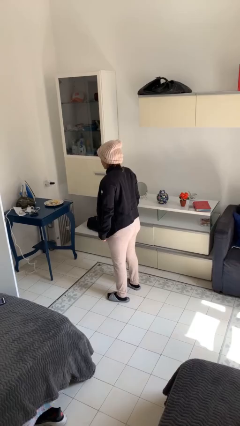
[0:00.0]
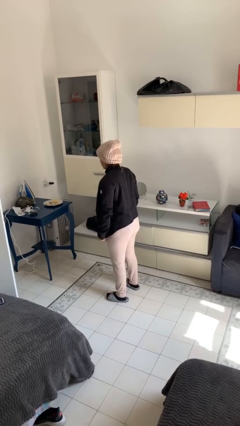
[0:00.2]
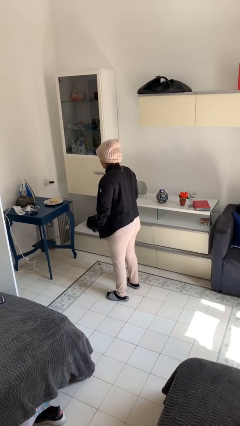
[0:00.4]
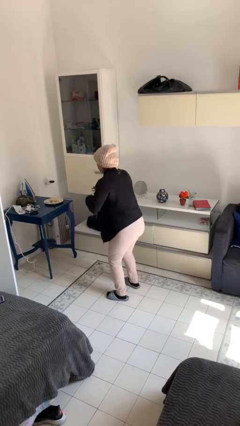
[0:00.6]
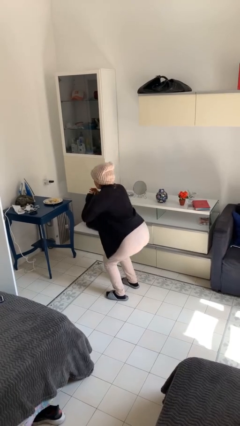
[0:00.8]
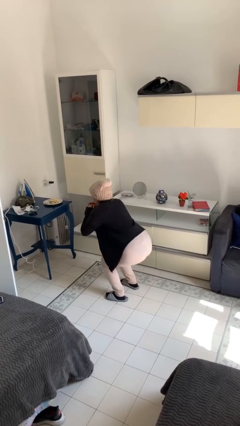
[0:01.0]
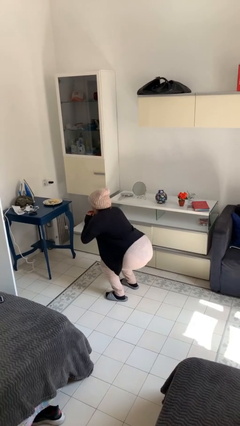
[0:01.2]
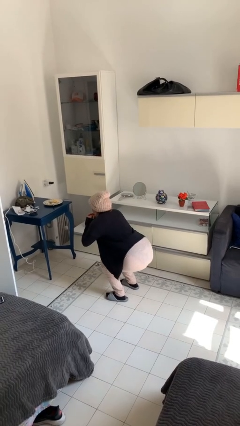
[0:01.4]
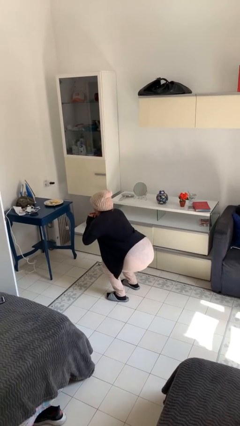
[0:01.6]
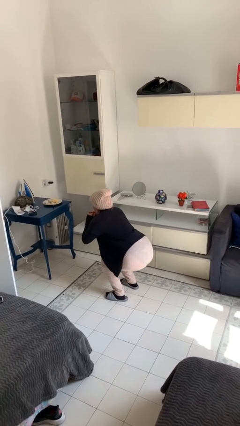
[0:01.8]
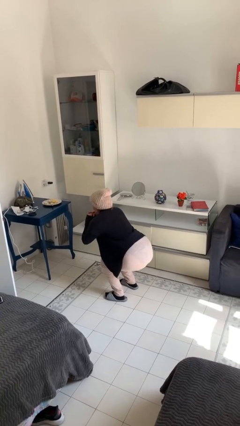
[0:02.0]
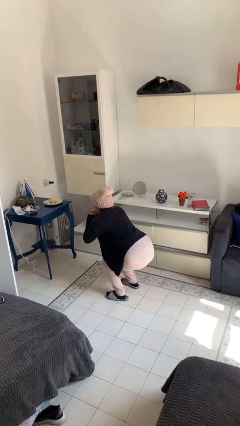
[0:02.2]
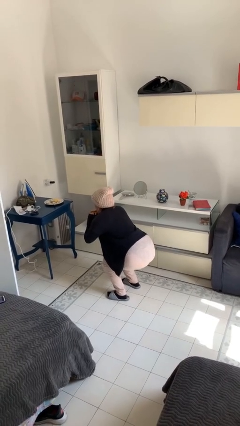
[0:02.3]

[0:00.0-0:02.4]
person squats

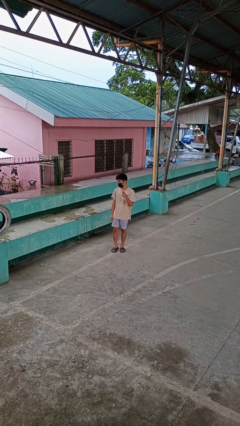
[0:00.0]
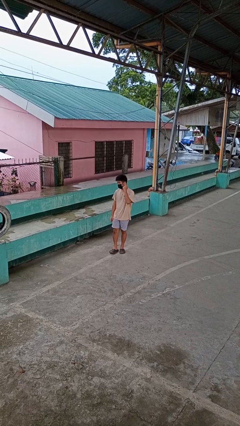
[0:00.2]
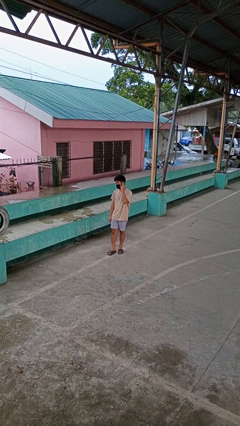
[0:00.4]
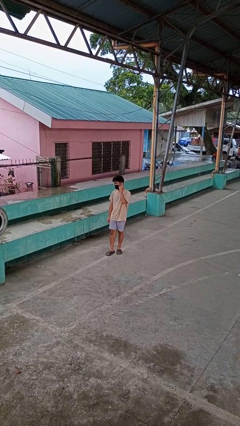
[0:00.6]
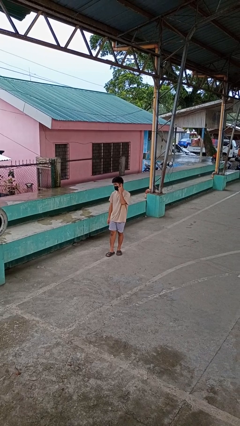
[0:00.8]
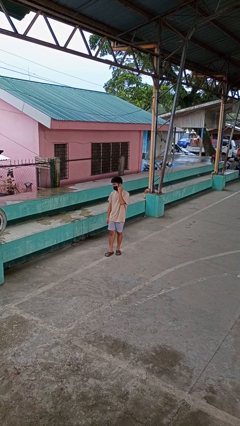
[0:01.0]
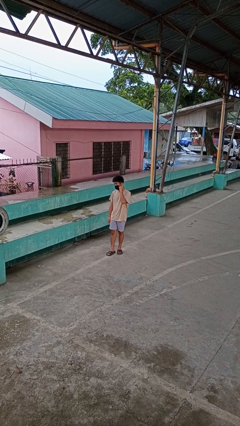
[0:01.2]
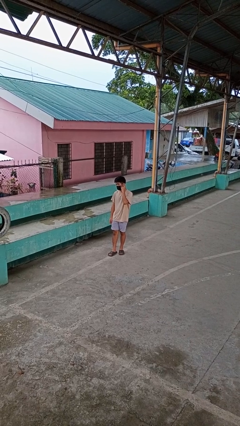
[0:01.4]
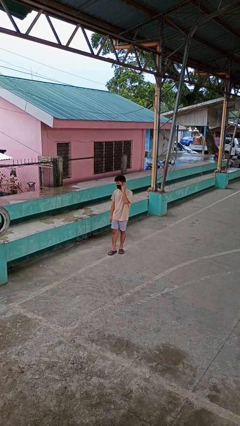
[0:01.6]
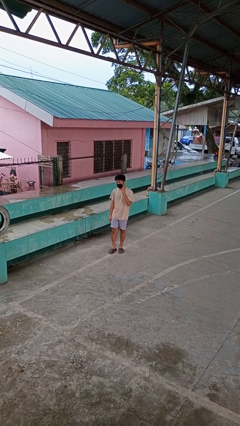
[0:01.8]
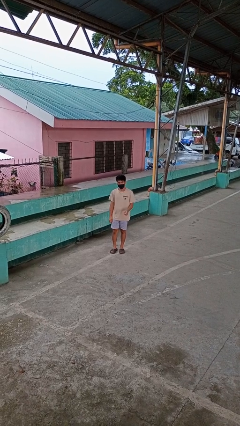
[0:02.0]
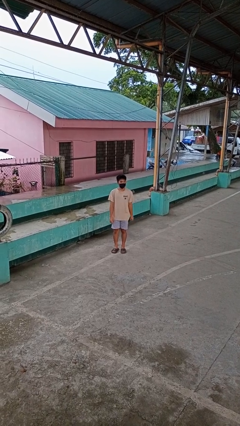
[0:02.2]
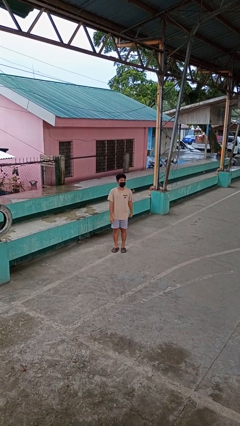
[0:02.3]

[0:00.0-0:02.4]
person gestures listen closely

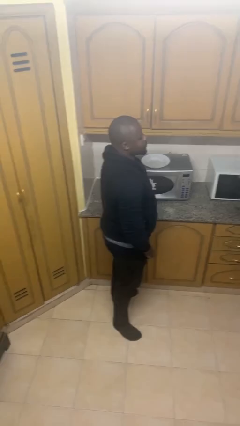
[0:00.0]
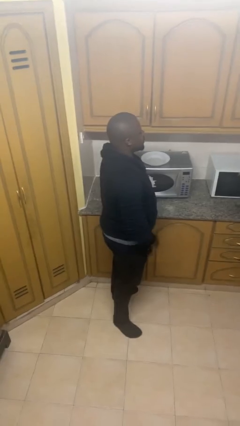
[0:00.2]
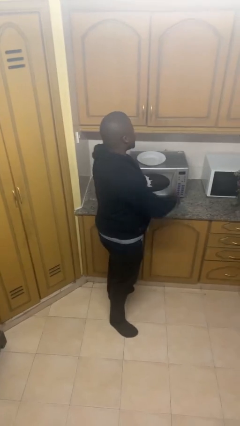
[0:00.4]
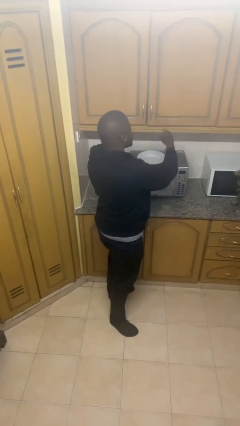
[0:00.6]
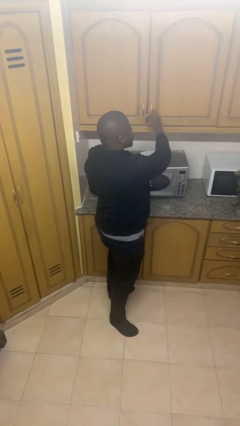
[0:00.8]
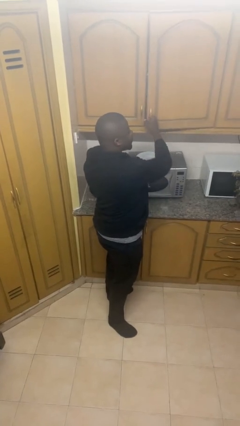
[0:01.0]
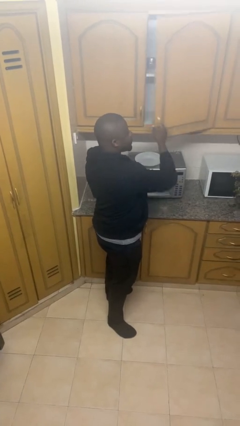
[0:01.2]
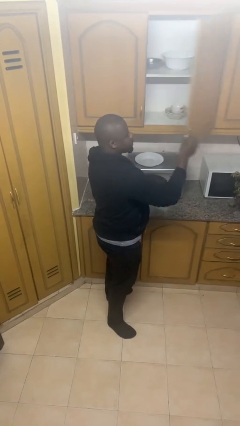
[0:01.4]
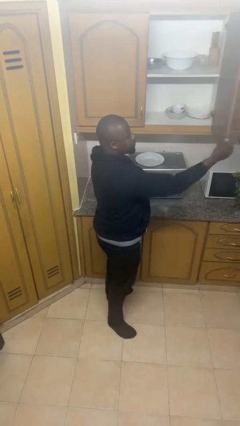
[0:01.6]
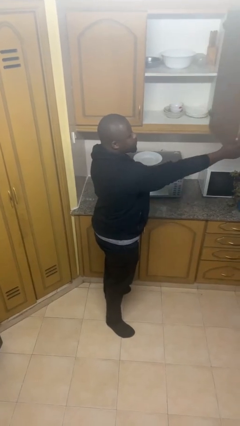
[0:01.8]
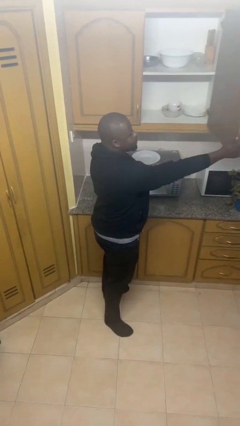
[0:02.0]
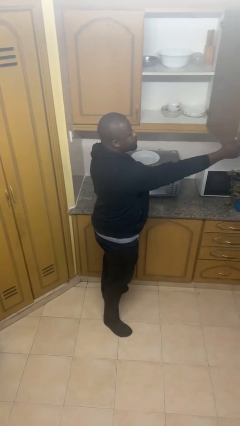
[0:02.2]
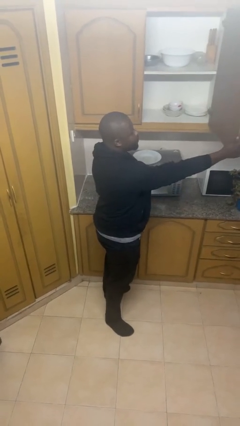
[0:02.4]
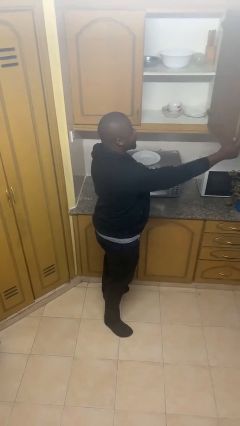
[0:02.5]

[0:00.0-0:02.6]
person opens cabinet

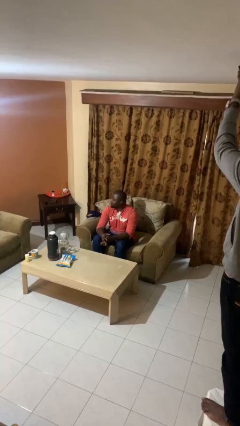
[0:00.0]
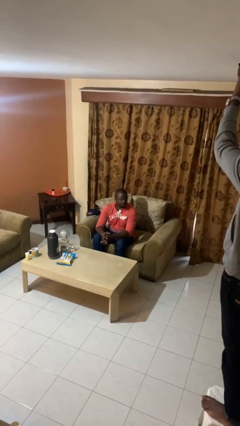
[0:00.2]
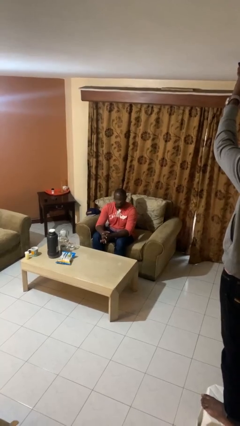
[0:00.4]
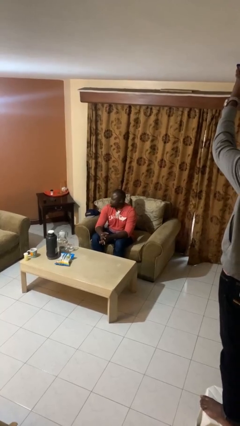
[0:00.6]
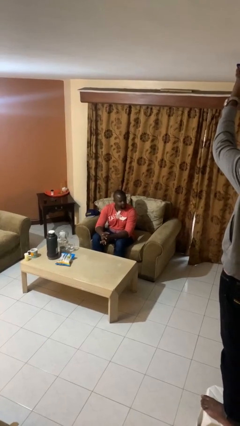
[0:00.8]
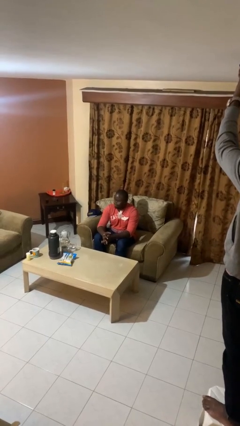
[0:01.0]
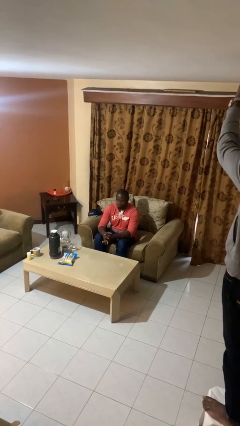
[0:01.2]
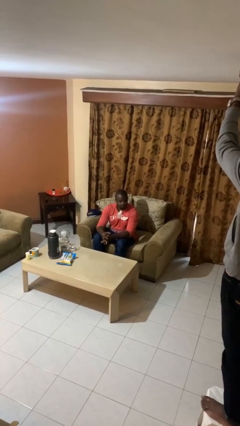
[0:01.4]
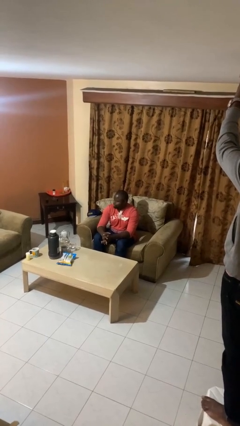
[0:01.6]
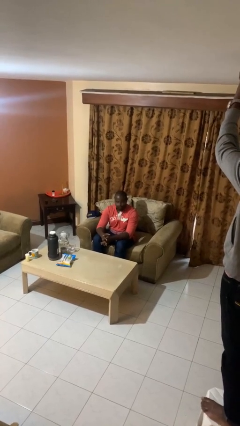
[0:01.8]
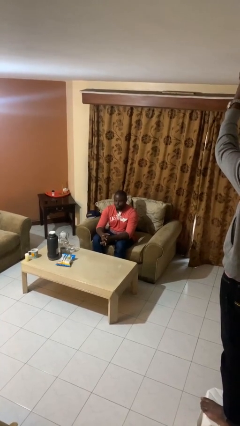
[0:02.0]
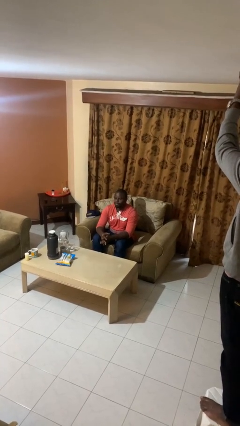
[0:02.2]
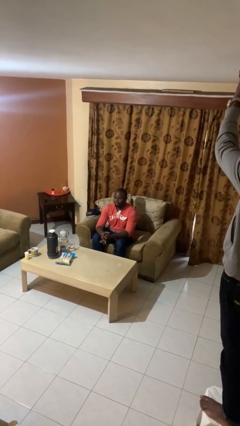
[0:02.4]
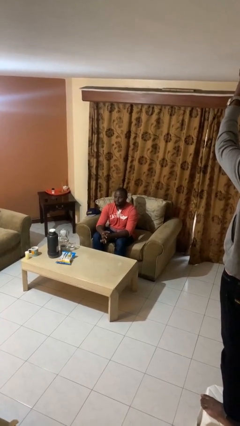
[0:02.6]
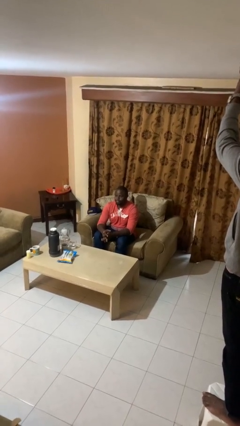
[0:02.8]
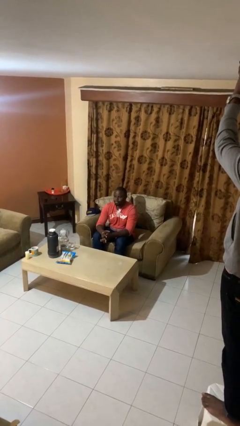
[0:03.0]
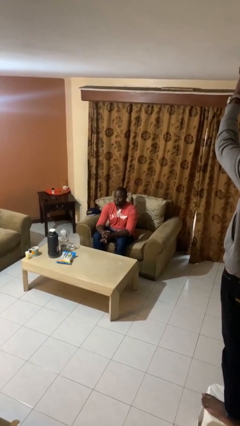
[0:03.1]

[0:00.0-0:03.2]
person shakes head

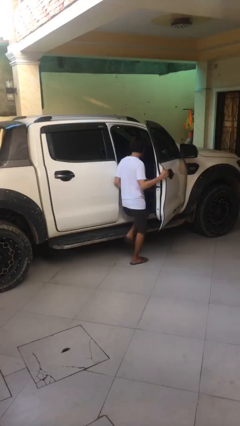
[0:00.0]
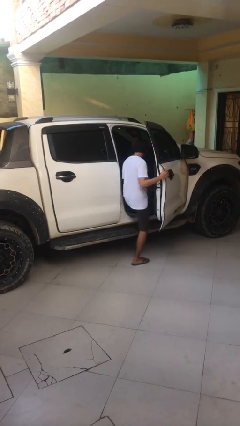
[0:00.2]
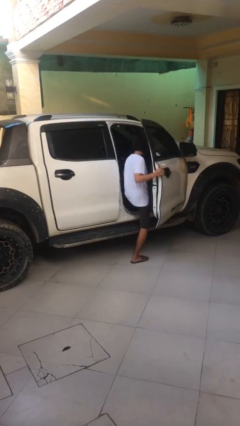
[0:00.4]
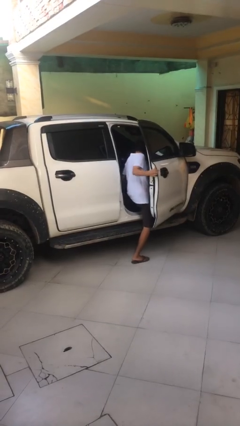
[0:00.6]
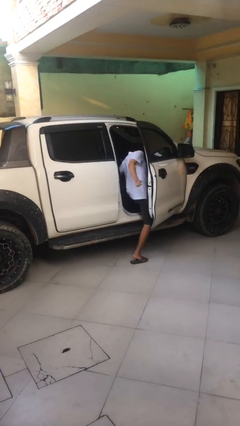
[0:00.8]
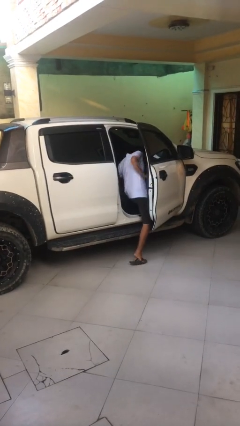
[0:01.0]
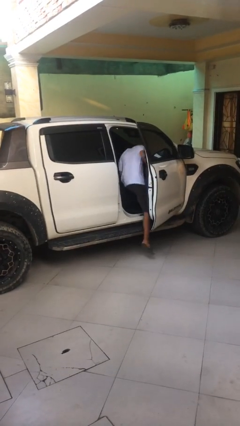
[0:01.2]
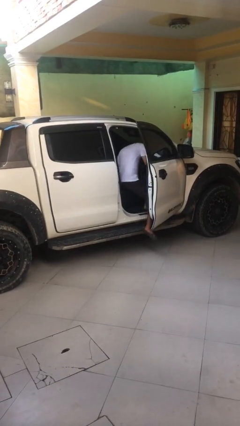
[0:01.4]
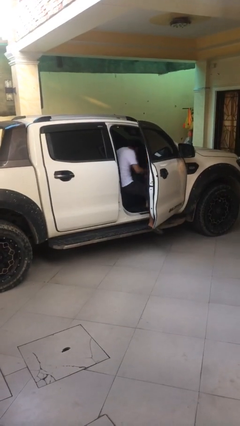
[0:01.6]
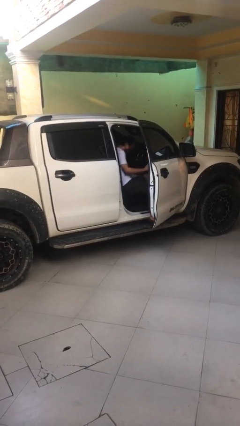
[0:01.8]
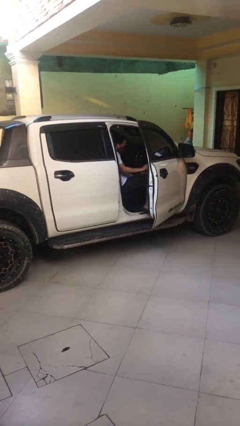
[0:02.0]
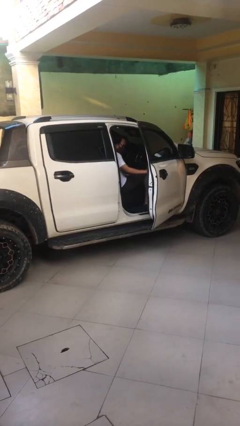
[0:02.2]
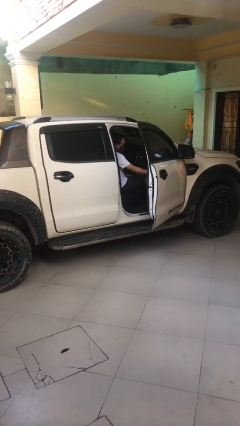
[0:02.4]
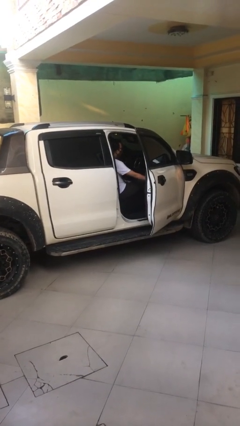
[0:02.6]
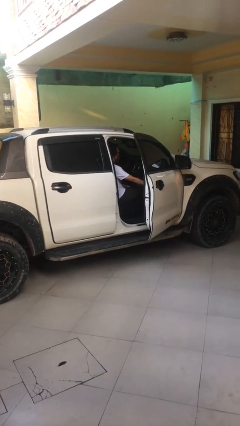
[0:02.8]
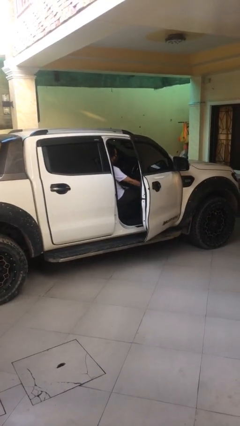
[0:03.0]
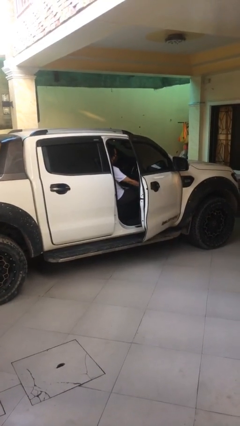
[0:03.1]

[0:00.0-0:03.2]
person enters car

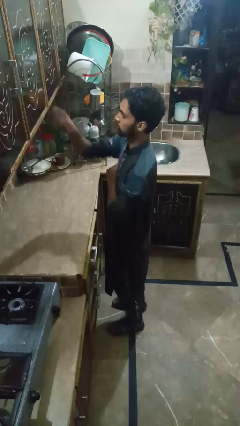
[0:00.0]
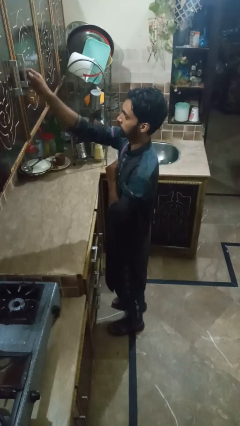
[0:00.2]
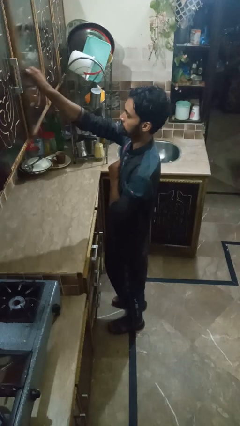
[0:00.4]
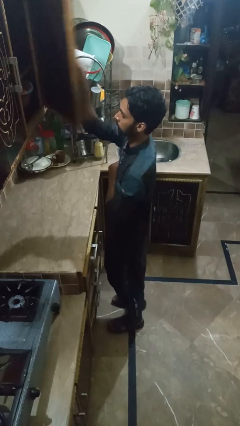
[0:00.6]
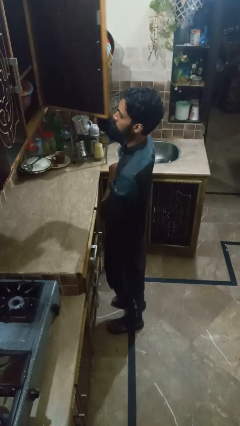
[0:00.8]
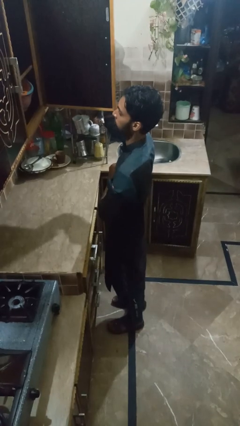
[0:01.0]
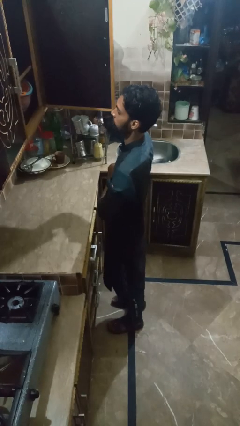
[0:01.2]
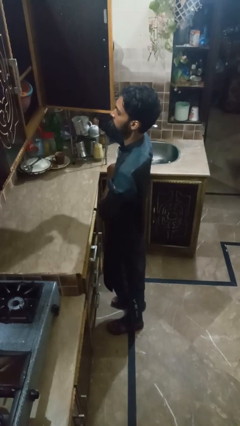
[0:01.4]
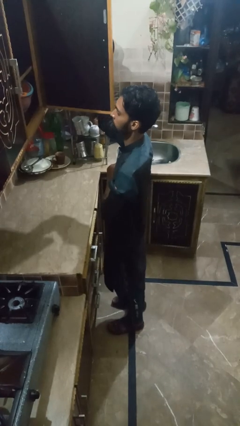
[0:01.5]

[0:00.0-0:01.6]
person opens kitchen drawer

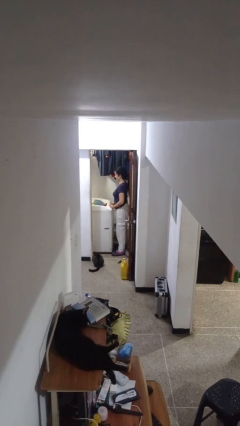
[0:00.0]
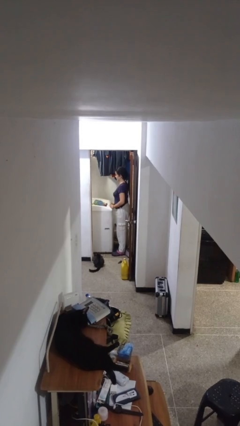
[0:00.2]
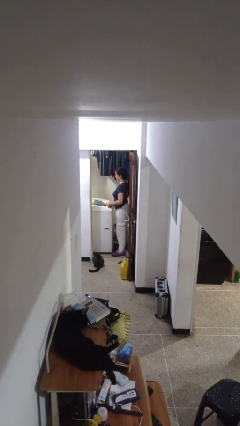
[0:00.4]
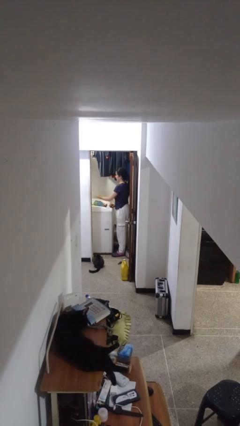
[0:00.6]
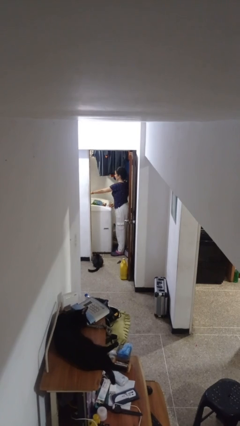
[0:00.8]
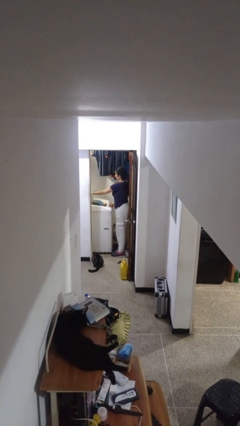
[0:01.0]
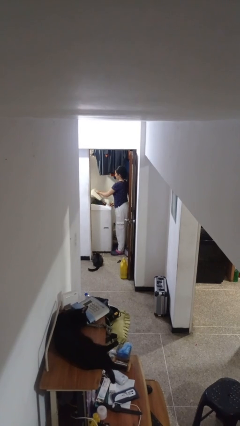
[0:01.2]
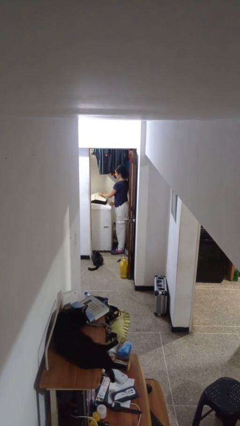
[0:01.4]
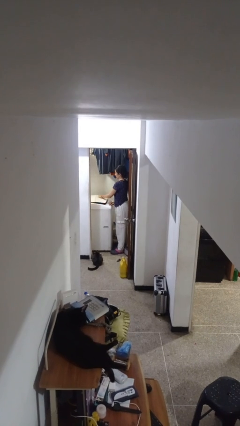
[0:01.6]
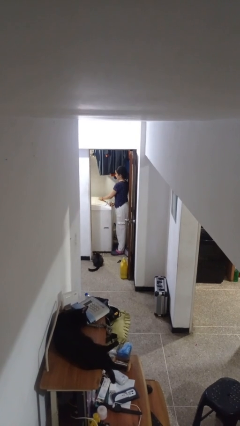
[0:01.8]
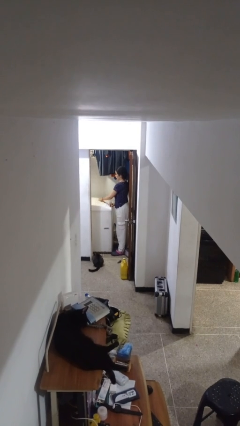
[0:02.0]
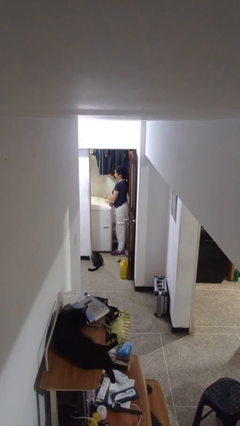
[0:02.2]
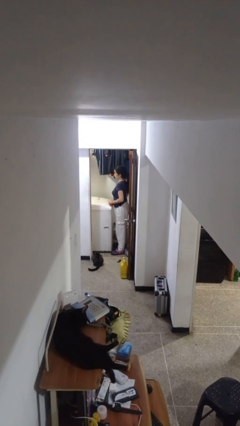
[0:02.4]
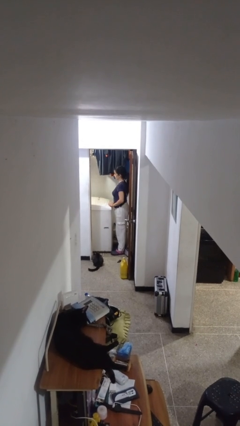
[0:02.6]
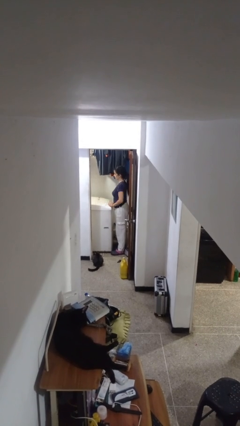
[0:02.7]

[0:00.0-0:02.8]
person closes clothes washer
